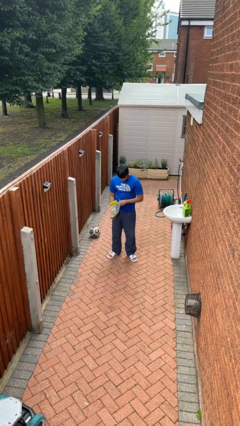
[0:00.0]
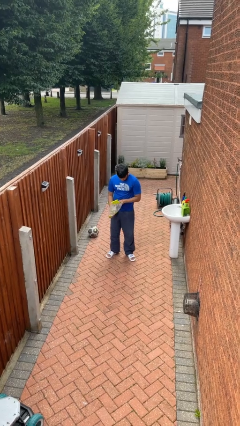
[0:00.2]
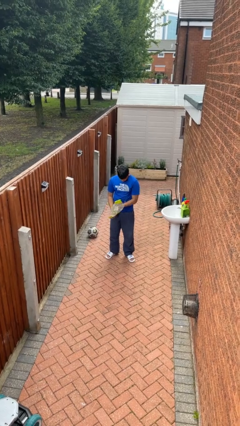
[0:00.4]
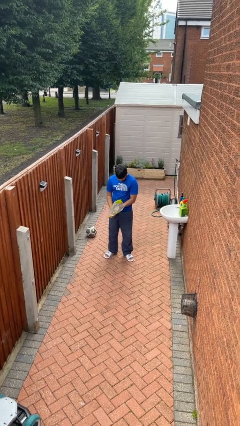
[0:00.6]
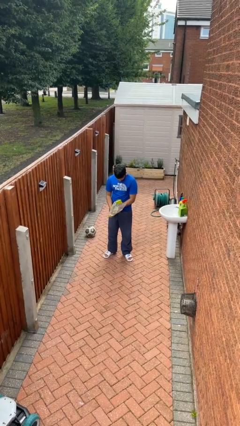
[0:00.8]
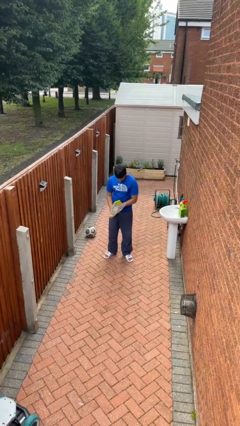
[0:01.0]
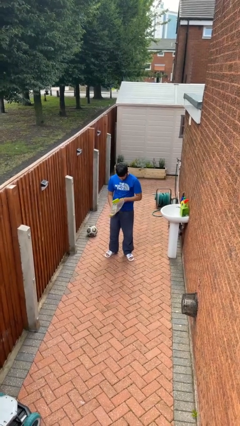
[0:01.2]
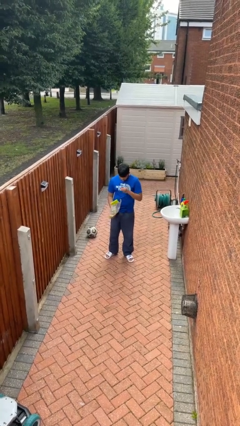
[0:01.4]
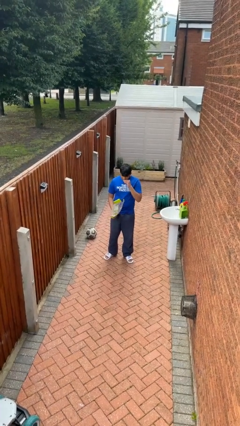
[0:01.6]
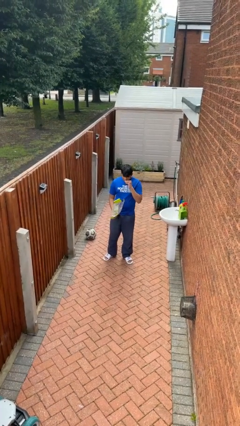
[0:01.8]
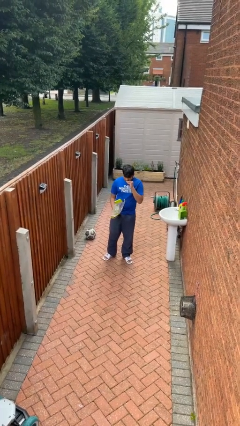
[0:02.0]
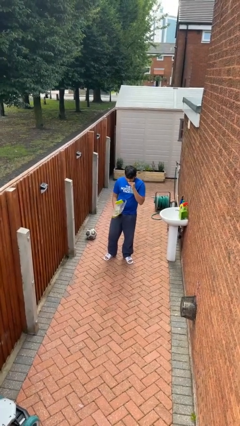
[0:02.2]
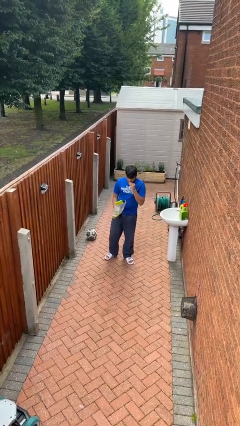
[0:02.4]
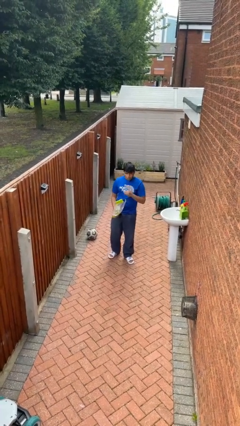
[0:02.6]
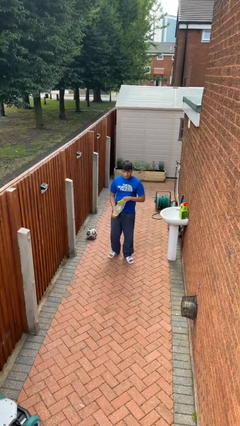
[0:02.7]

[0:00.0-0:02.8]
person eats snack from bag

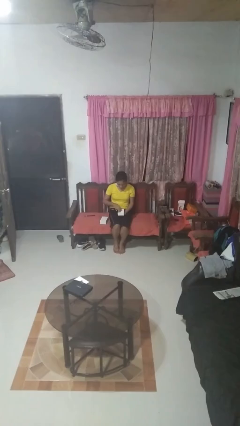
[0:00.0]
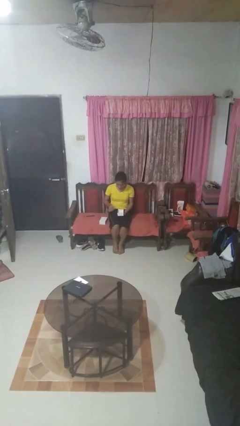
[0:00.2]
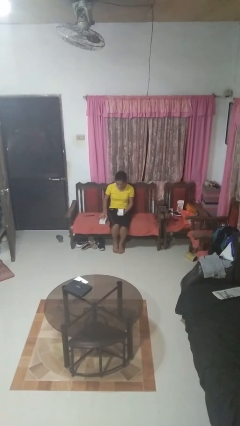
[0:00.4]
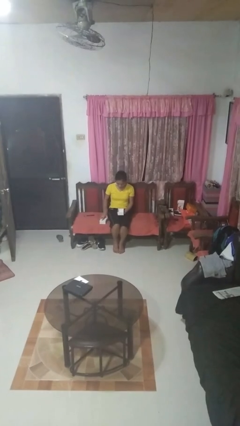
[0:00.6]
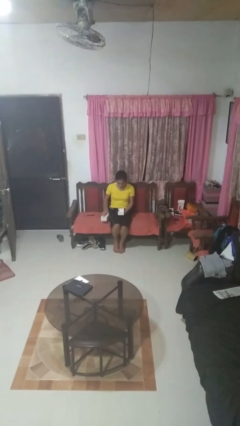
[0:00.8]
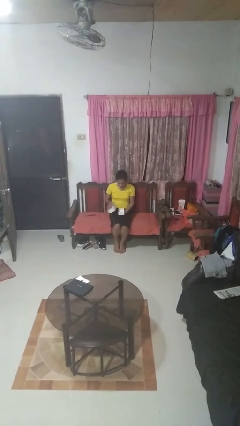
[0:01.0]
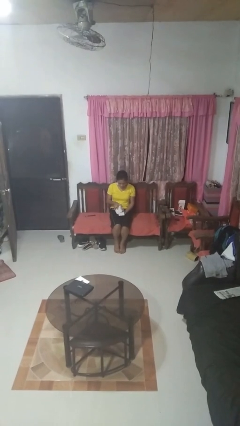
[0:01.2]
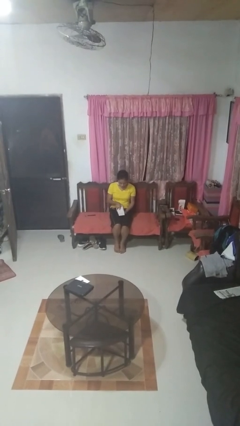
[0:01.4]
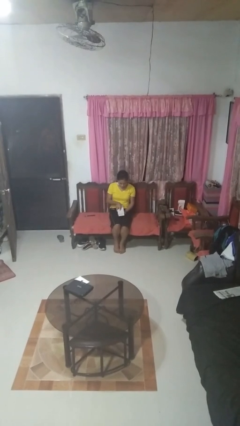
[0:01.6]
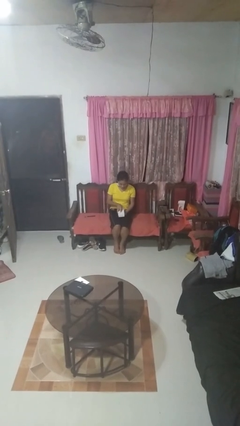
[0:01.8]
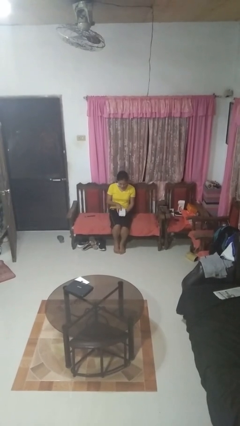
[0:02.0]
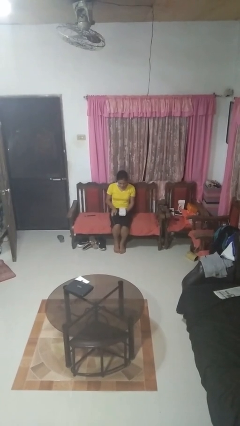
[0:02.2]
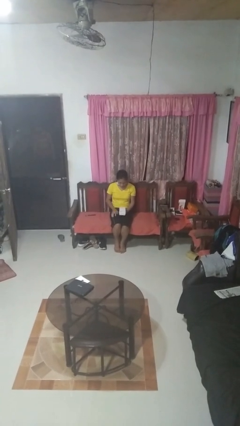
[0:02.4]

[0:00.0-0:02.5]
person closes jewelry box

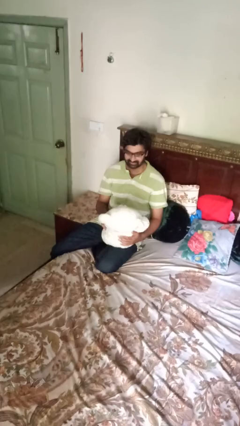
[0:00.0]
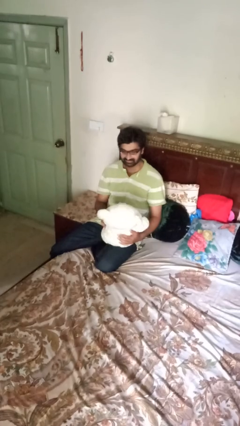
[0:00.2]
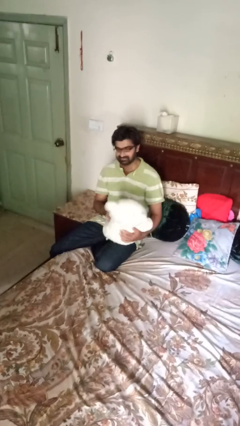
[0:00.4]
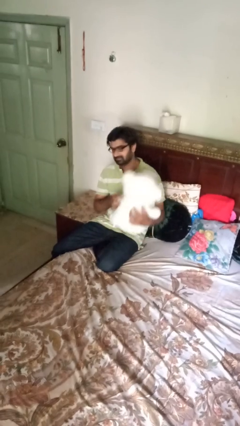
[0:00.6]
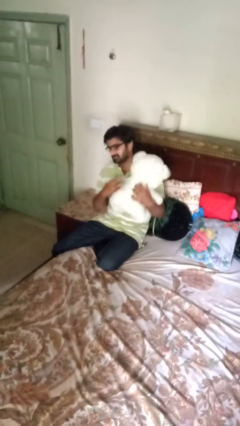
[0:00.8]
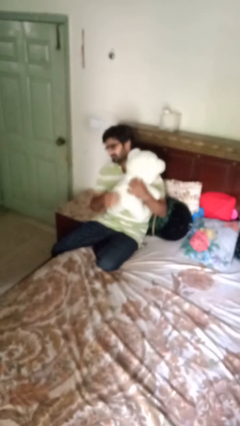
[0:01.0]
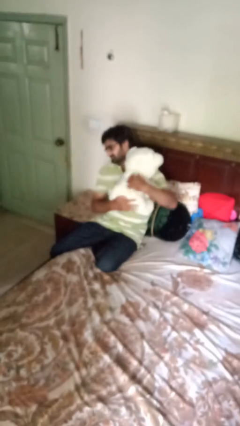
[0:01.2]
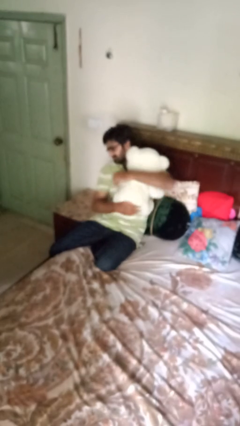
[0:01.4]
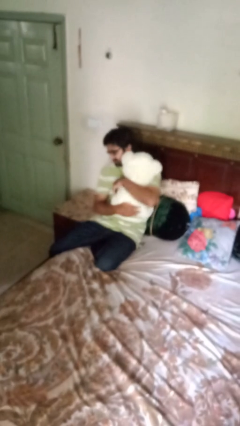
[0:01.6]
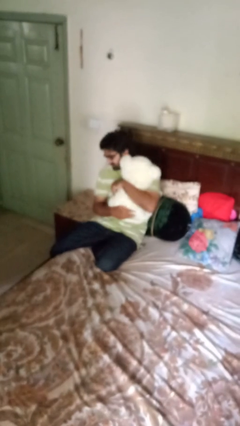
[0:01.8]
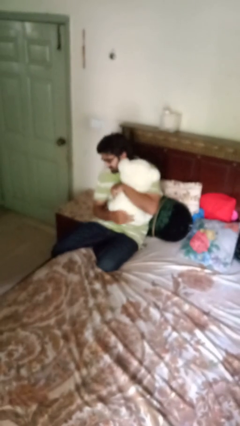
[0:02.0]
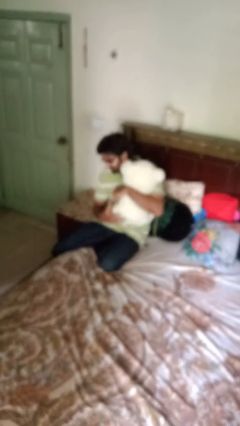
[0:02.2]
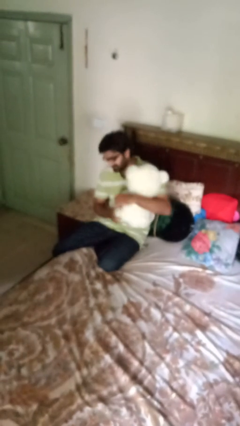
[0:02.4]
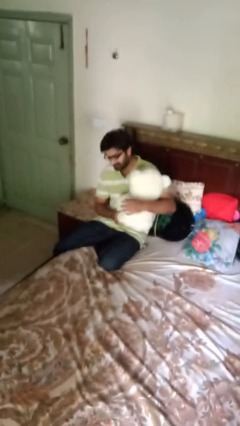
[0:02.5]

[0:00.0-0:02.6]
person hugs stuffed animal

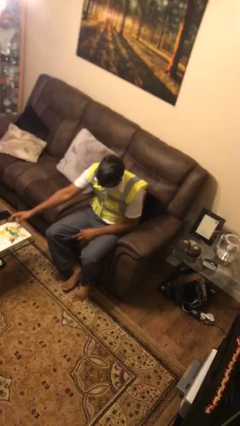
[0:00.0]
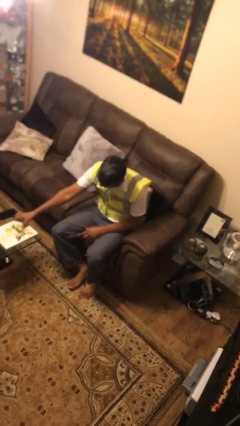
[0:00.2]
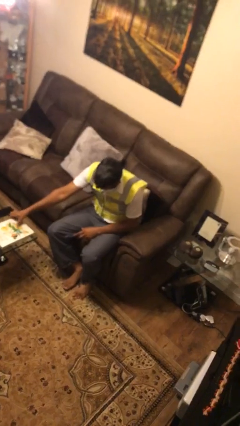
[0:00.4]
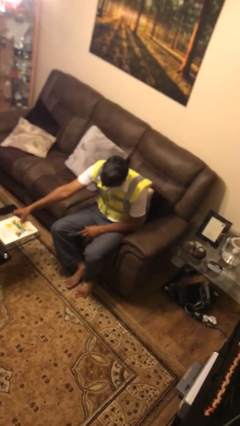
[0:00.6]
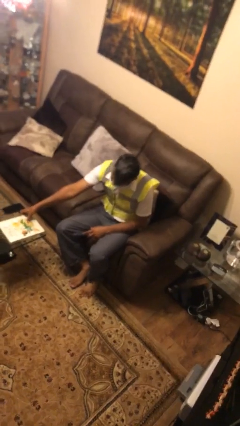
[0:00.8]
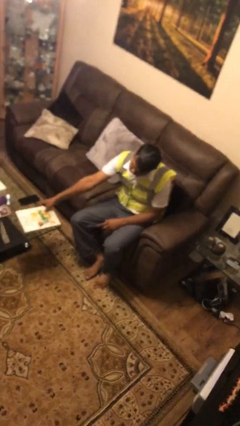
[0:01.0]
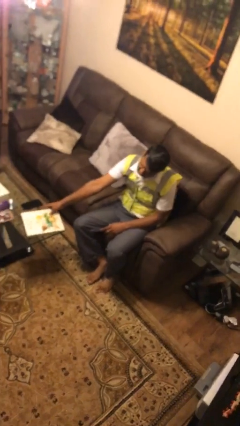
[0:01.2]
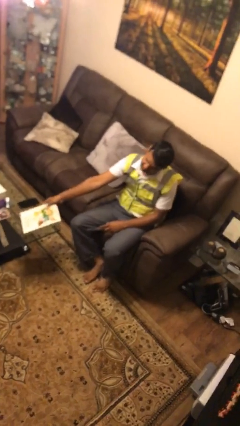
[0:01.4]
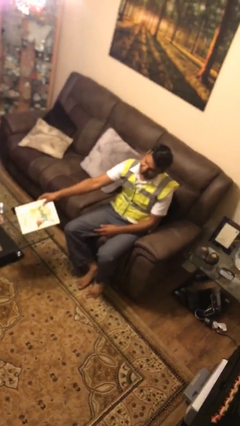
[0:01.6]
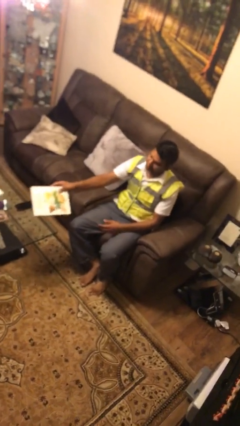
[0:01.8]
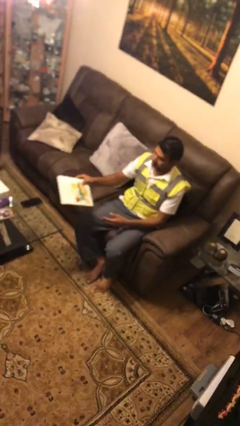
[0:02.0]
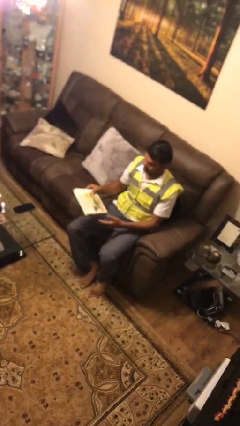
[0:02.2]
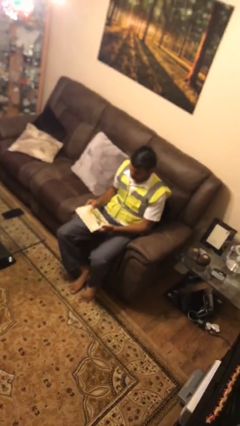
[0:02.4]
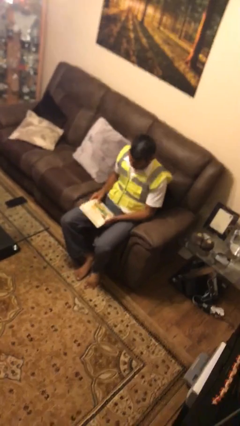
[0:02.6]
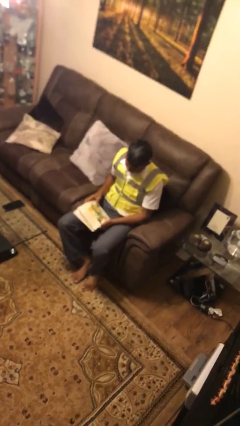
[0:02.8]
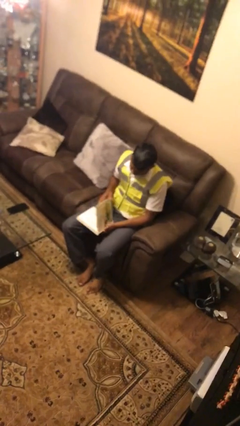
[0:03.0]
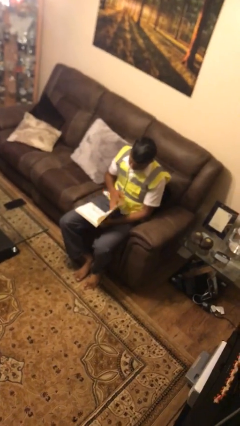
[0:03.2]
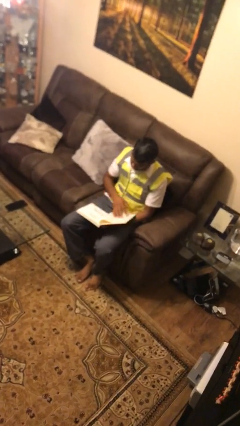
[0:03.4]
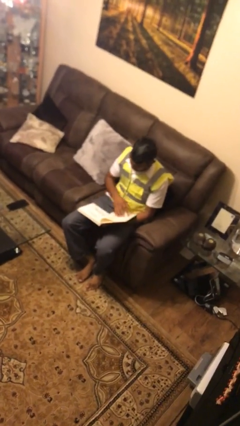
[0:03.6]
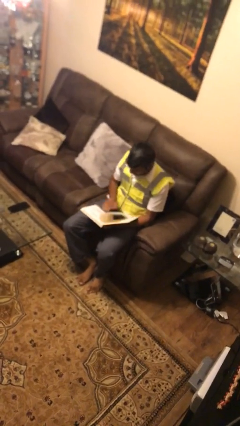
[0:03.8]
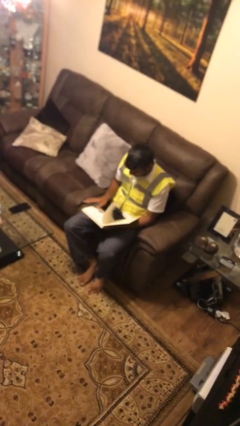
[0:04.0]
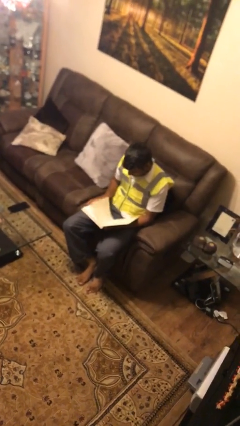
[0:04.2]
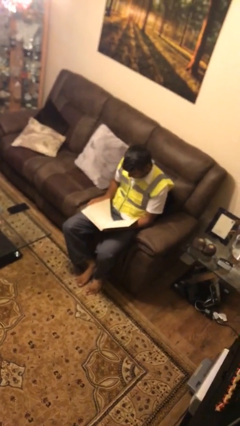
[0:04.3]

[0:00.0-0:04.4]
person picks up object from table

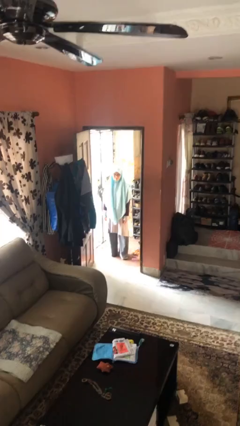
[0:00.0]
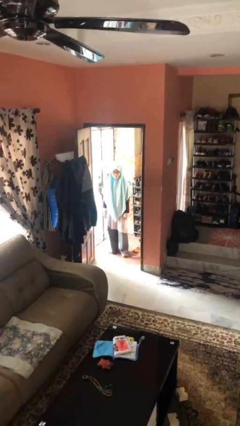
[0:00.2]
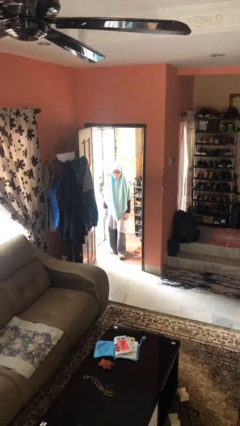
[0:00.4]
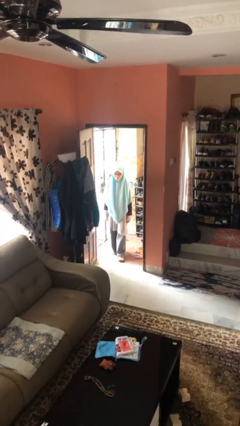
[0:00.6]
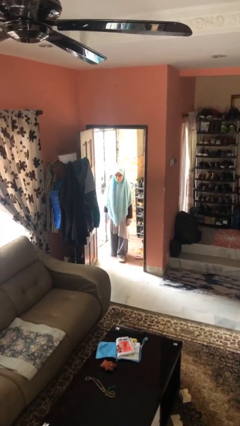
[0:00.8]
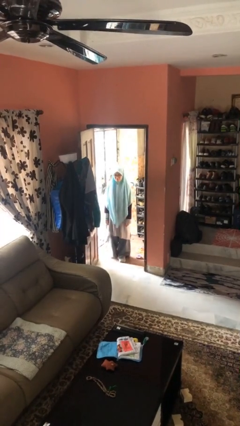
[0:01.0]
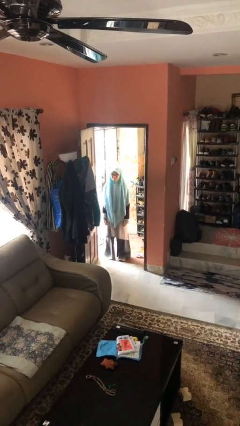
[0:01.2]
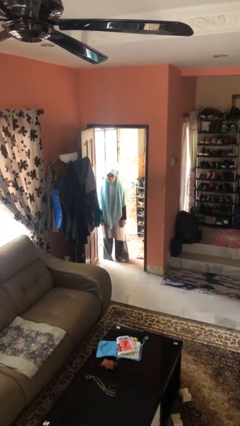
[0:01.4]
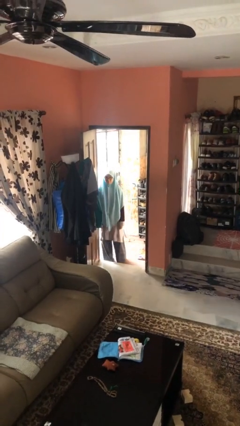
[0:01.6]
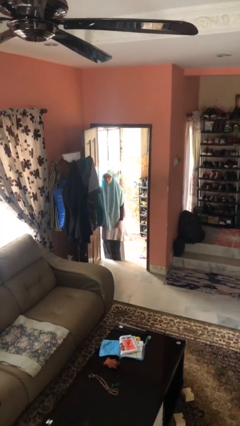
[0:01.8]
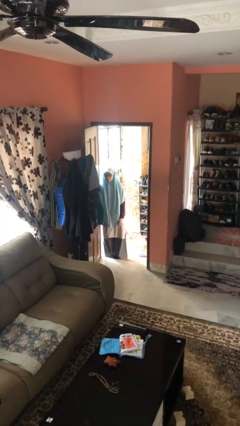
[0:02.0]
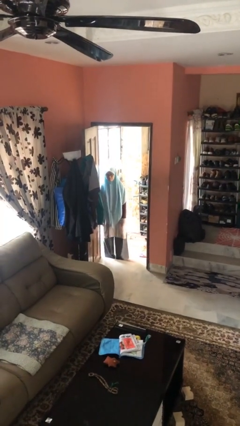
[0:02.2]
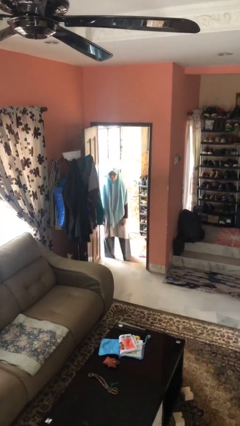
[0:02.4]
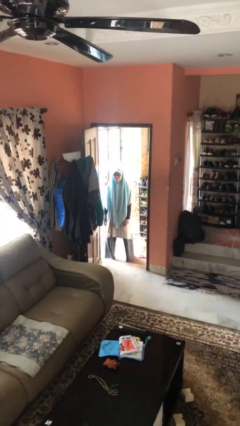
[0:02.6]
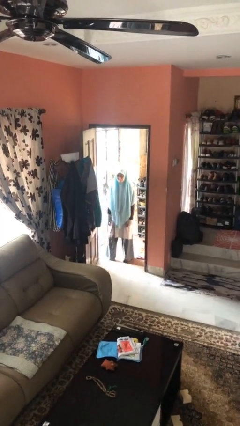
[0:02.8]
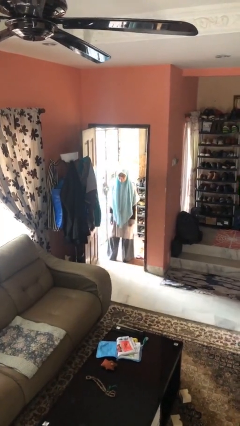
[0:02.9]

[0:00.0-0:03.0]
person bumps into wall

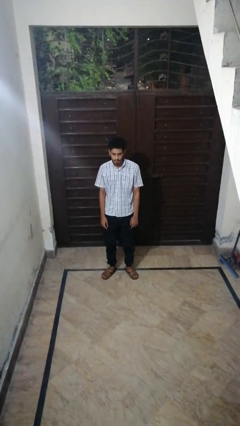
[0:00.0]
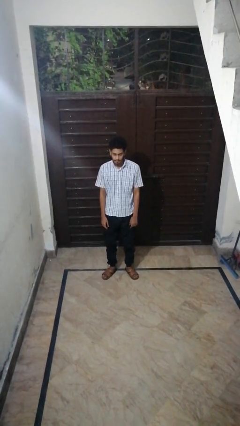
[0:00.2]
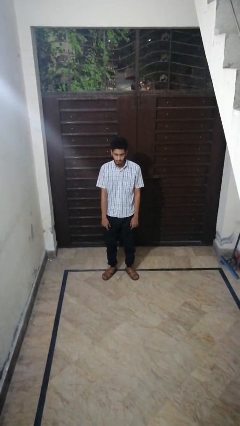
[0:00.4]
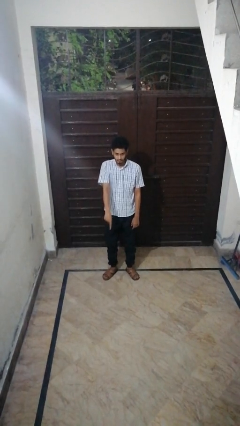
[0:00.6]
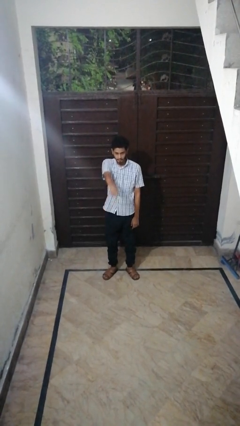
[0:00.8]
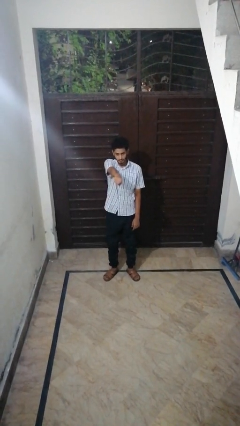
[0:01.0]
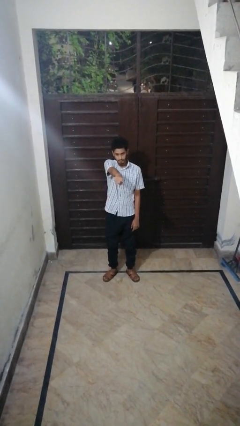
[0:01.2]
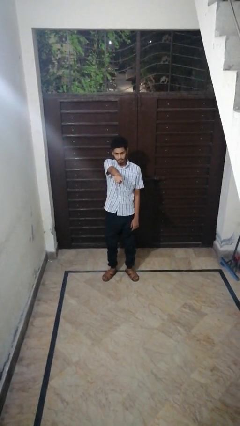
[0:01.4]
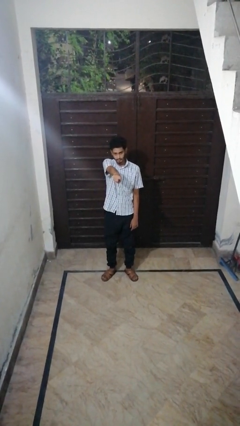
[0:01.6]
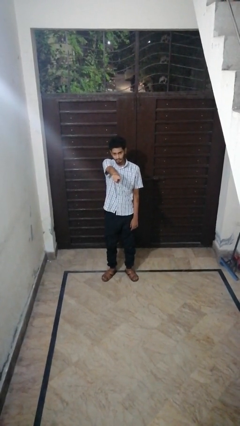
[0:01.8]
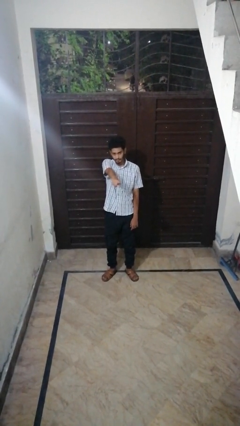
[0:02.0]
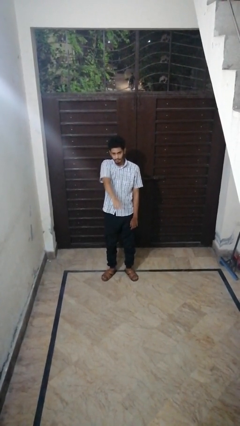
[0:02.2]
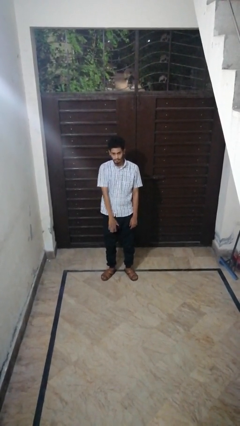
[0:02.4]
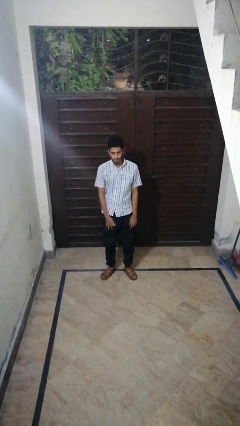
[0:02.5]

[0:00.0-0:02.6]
person points at person
